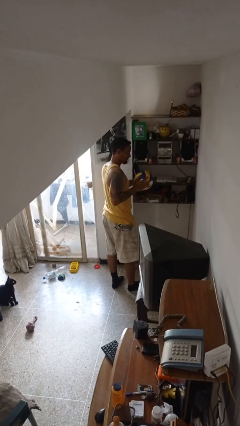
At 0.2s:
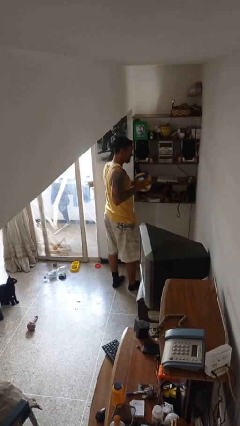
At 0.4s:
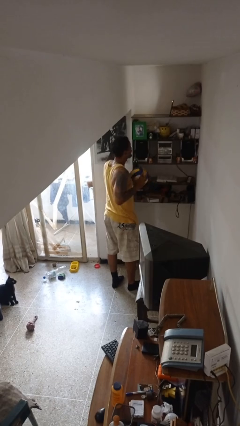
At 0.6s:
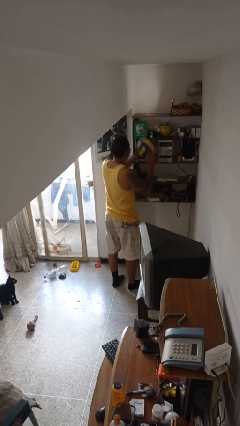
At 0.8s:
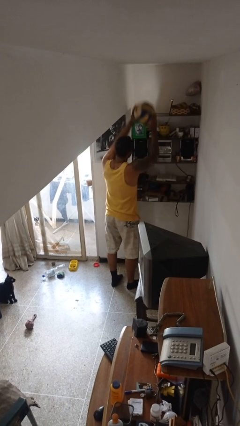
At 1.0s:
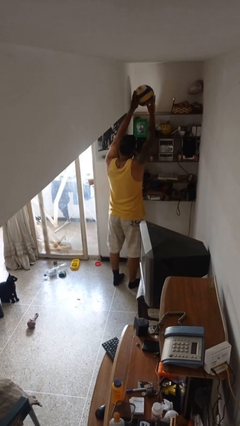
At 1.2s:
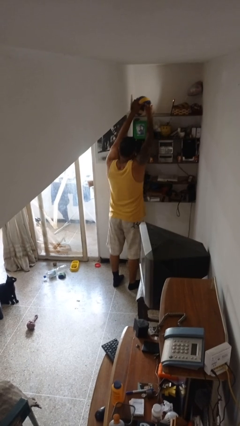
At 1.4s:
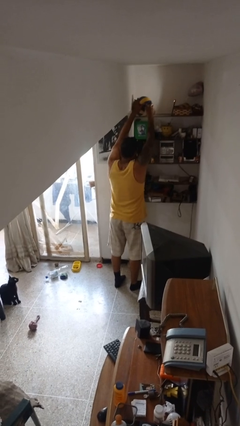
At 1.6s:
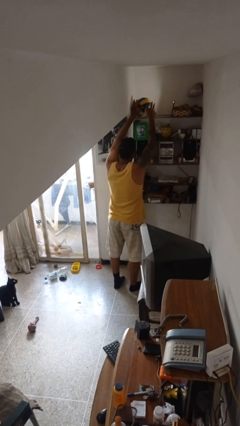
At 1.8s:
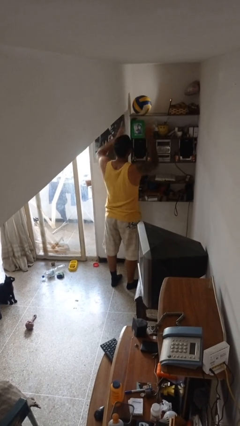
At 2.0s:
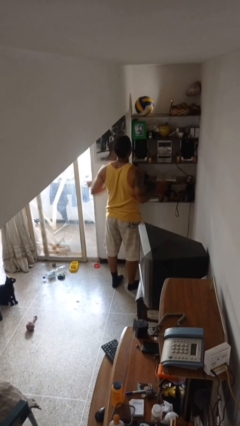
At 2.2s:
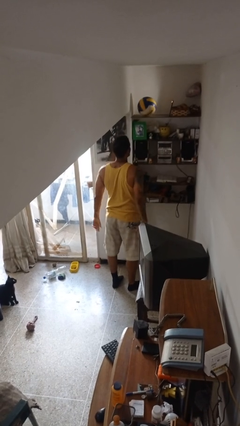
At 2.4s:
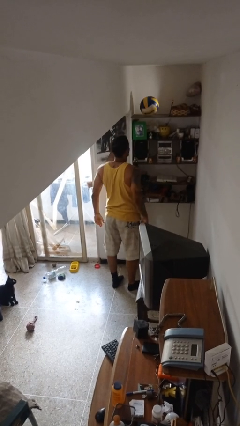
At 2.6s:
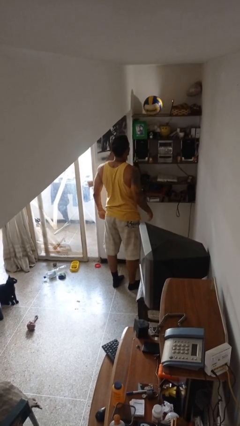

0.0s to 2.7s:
person puts down object on shelf

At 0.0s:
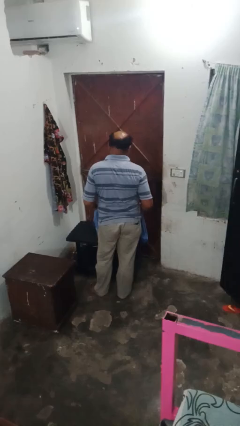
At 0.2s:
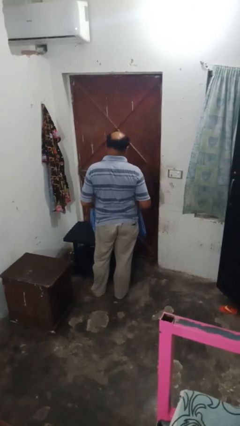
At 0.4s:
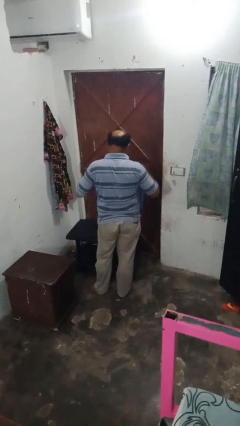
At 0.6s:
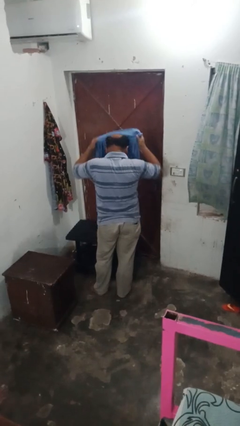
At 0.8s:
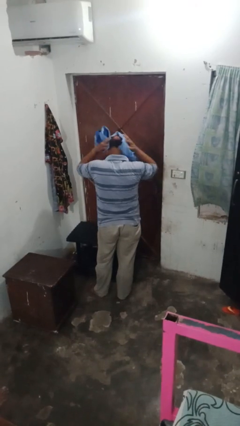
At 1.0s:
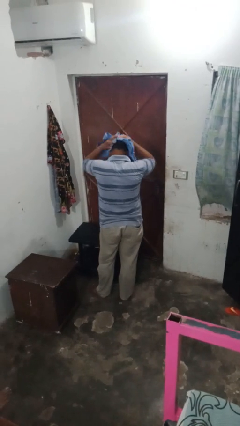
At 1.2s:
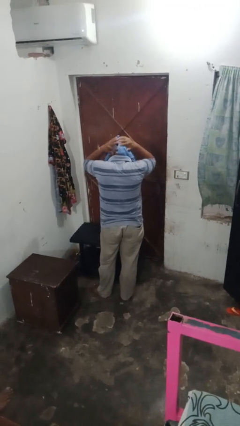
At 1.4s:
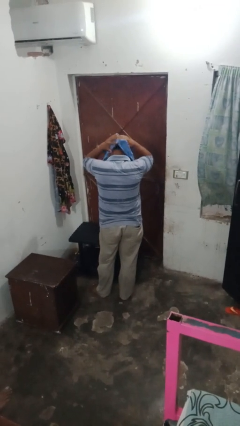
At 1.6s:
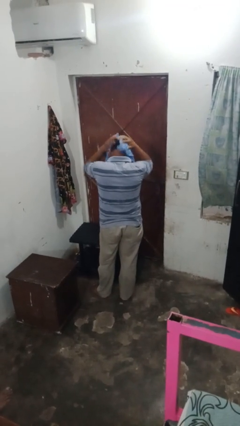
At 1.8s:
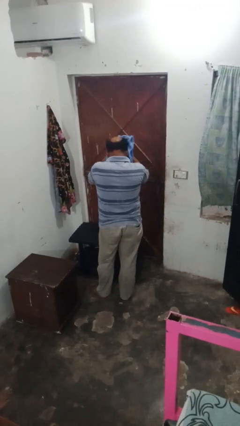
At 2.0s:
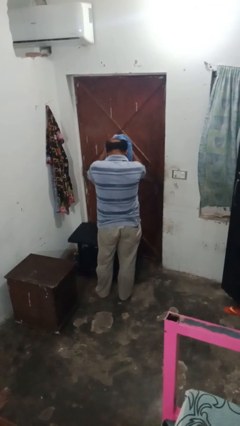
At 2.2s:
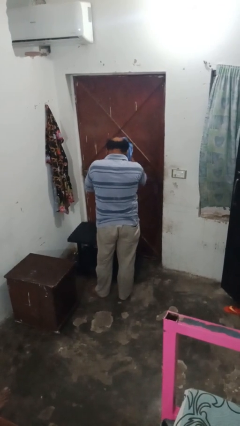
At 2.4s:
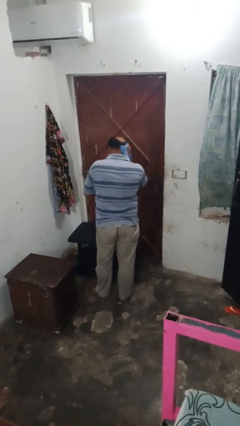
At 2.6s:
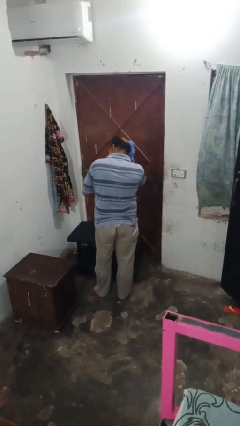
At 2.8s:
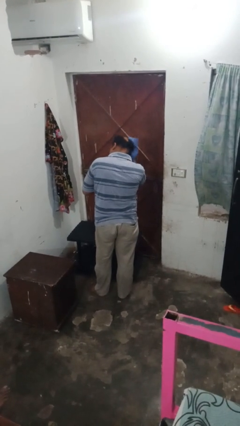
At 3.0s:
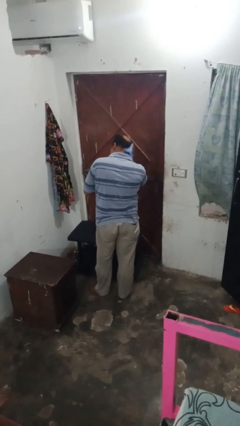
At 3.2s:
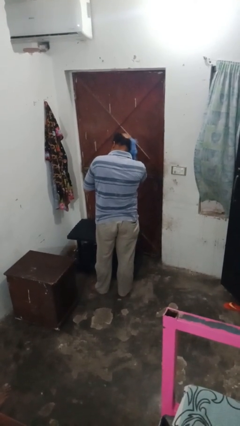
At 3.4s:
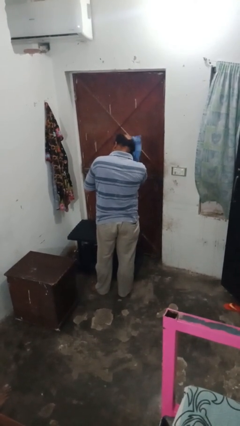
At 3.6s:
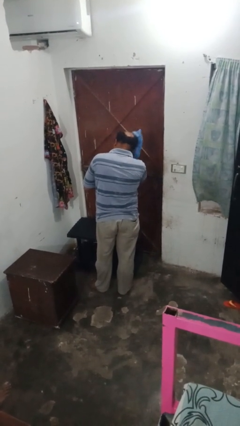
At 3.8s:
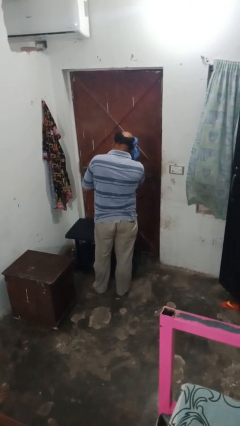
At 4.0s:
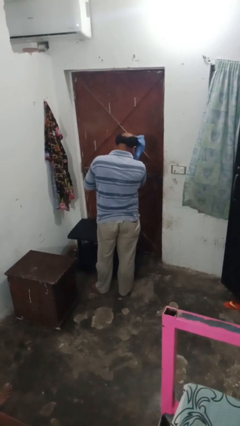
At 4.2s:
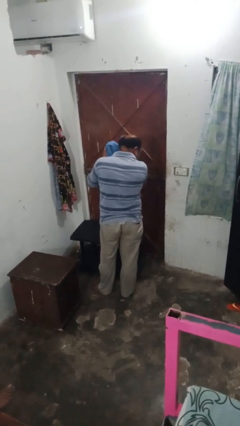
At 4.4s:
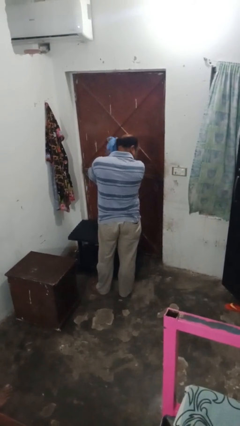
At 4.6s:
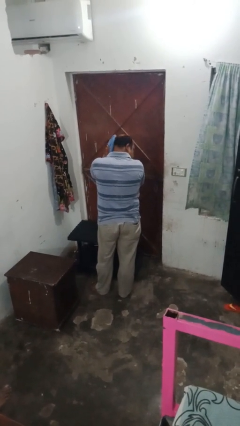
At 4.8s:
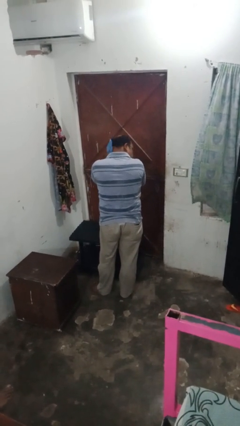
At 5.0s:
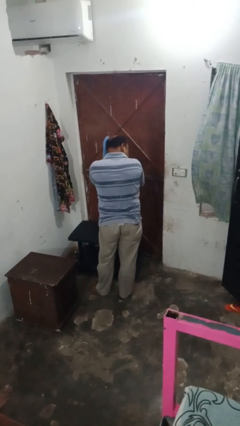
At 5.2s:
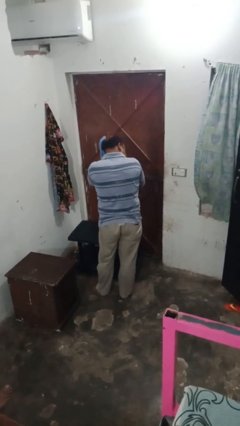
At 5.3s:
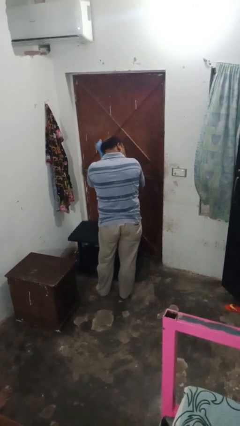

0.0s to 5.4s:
person dries hair with towel

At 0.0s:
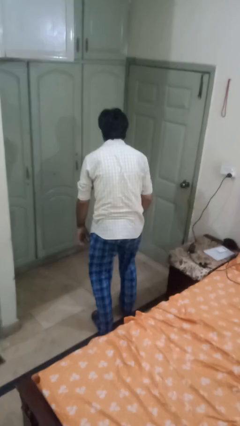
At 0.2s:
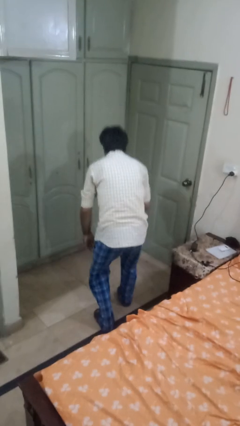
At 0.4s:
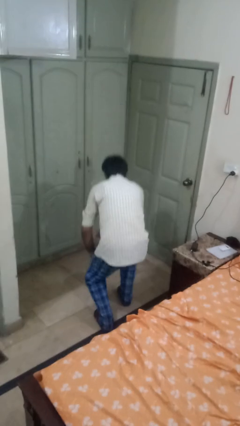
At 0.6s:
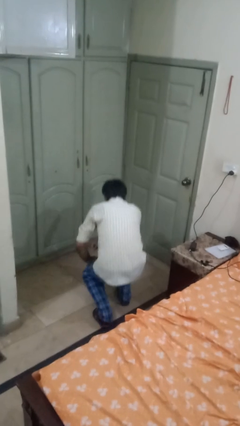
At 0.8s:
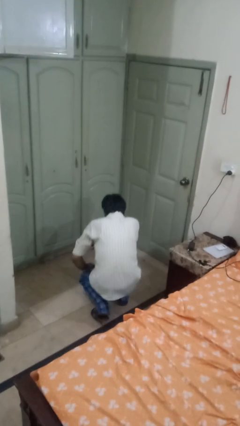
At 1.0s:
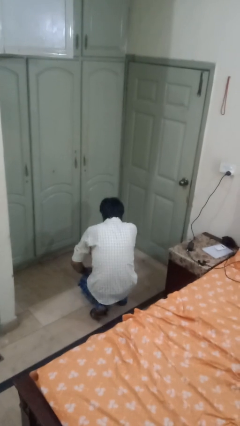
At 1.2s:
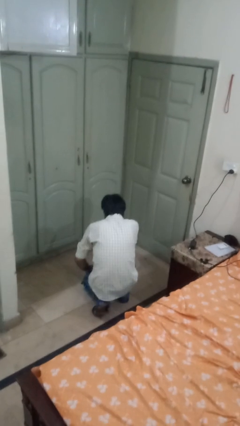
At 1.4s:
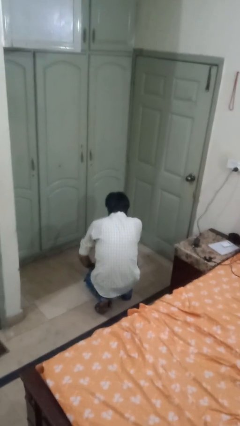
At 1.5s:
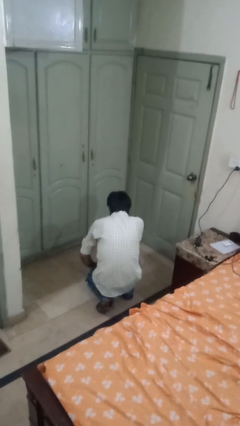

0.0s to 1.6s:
person kneels

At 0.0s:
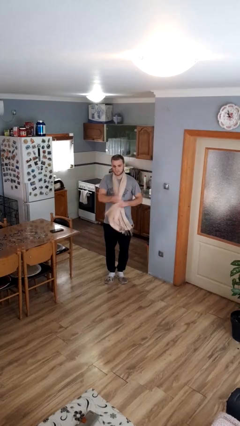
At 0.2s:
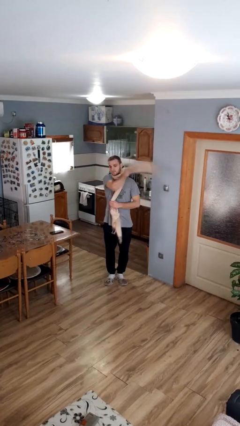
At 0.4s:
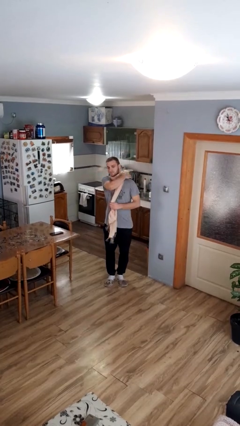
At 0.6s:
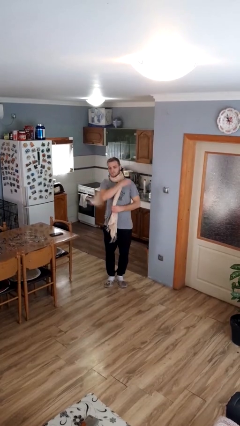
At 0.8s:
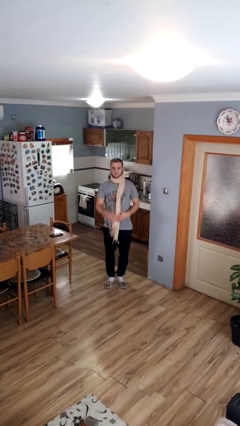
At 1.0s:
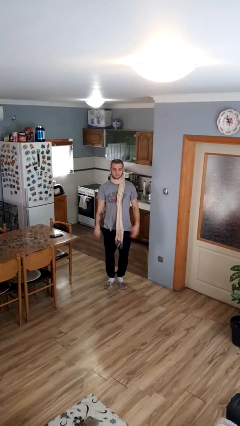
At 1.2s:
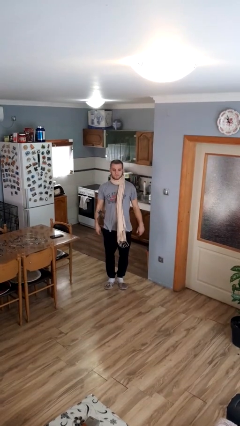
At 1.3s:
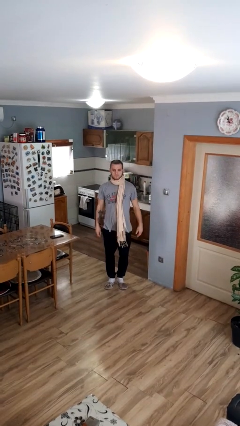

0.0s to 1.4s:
person puts on scarf

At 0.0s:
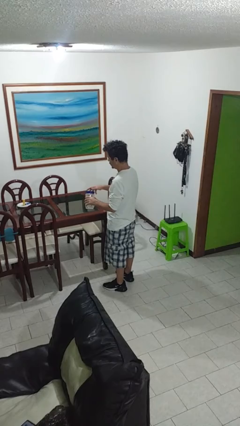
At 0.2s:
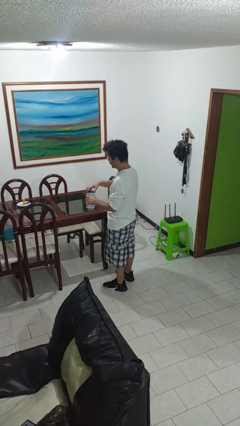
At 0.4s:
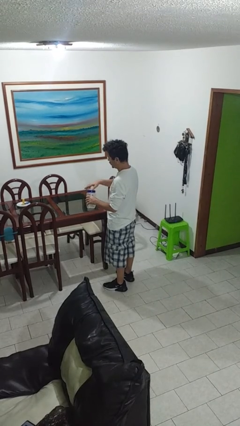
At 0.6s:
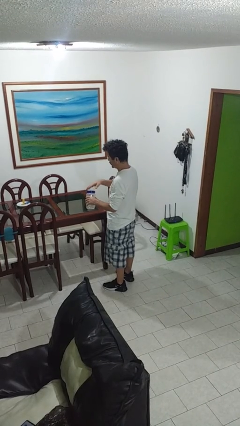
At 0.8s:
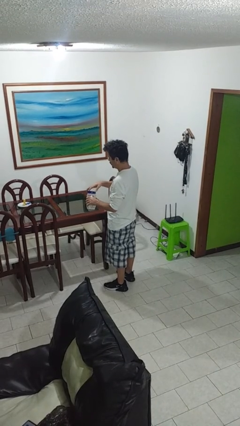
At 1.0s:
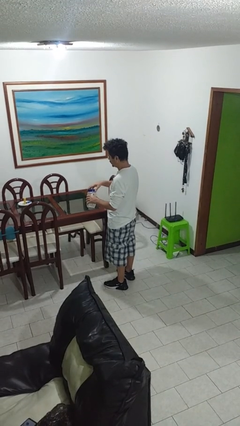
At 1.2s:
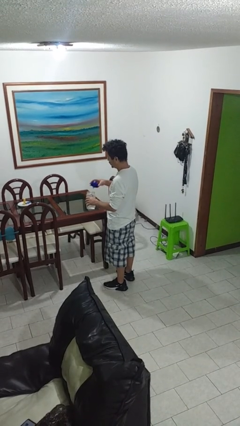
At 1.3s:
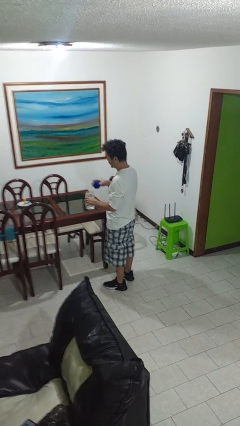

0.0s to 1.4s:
person opens jar

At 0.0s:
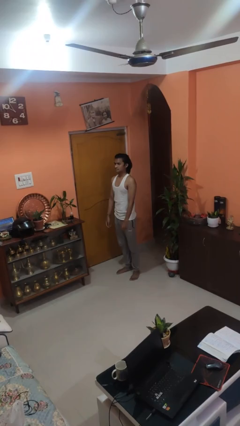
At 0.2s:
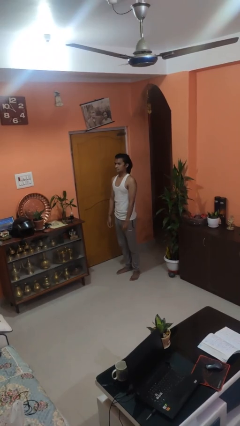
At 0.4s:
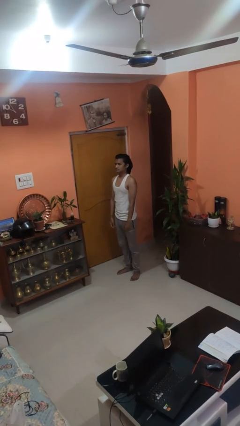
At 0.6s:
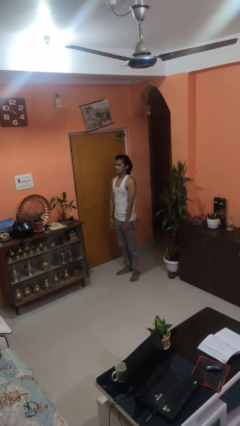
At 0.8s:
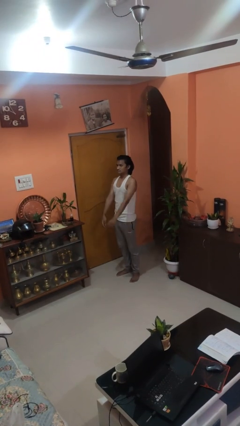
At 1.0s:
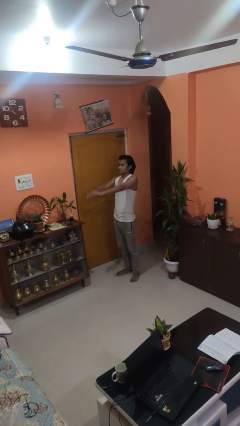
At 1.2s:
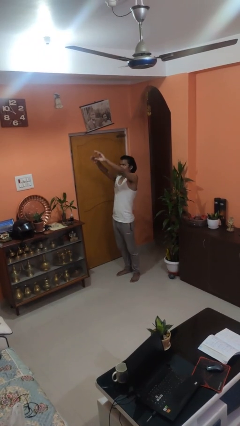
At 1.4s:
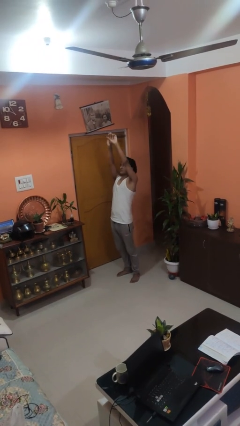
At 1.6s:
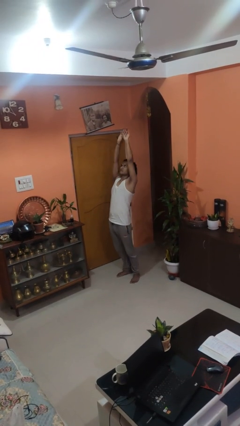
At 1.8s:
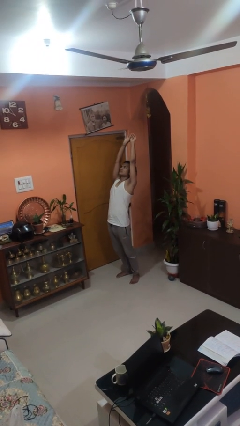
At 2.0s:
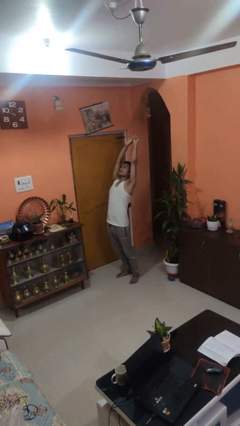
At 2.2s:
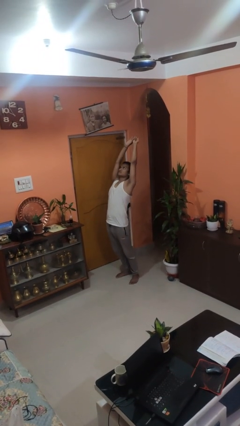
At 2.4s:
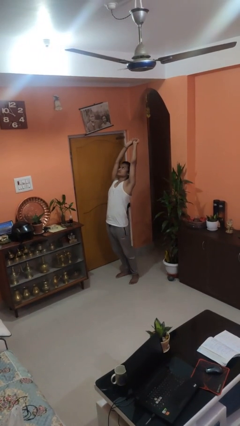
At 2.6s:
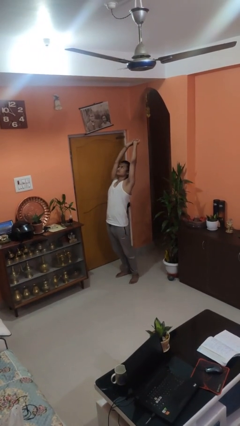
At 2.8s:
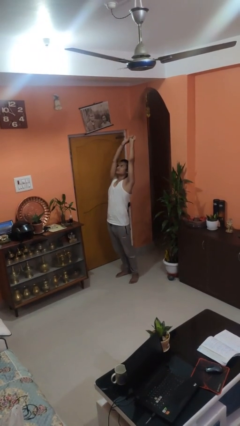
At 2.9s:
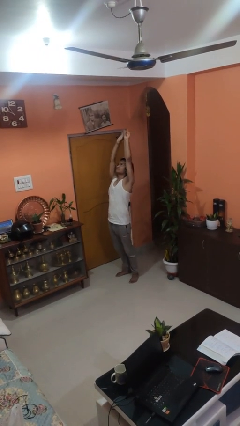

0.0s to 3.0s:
person stretches arms over head

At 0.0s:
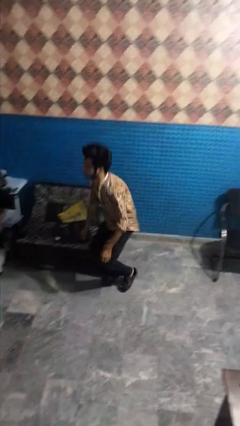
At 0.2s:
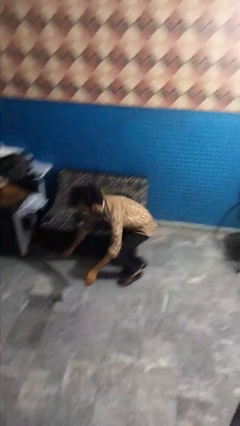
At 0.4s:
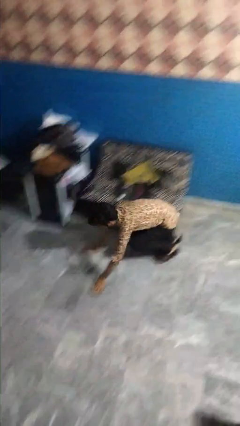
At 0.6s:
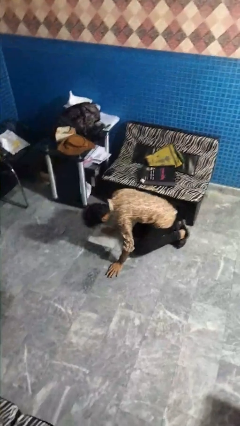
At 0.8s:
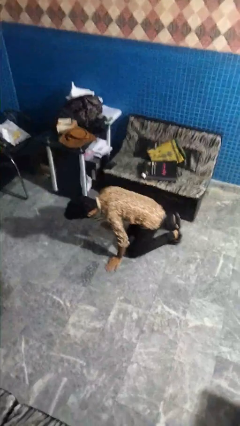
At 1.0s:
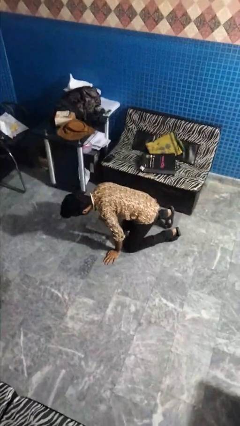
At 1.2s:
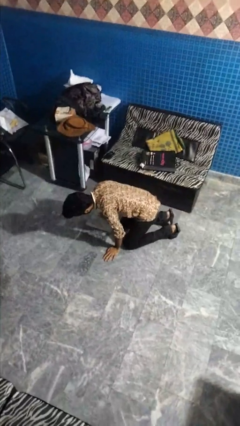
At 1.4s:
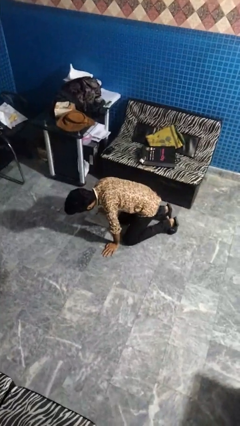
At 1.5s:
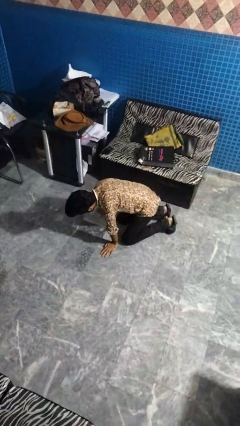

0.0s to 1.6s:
person trips on object on floor
